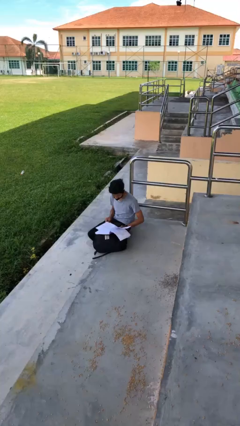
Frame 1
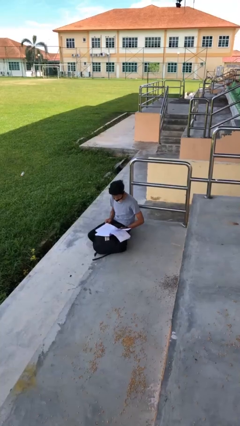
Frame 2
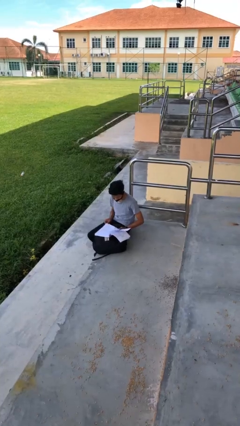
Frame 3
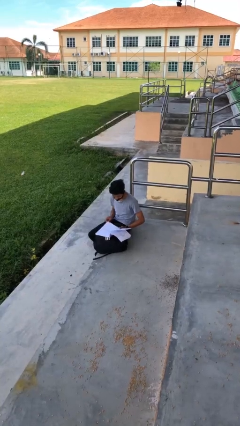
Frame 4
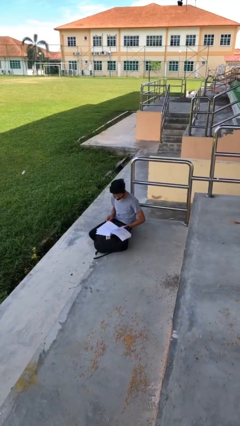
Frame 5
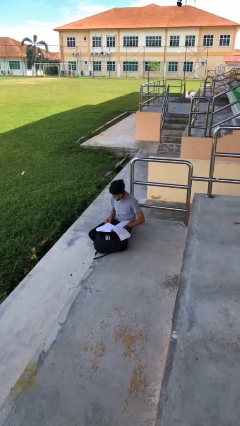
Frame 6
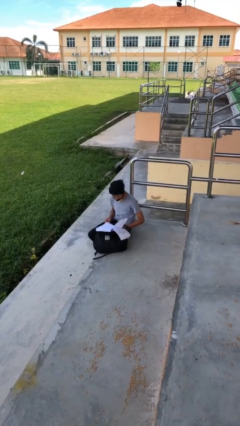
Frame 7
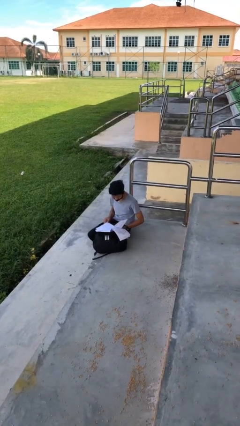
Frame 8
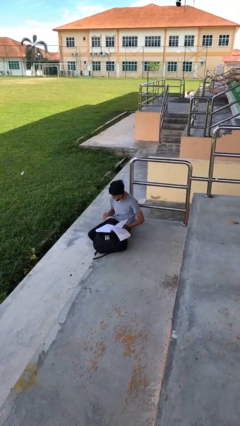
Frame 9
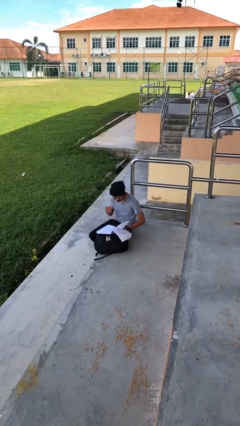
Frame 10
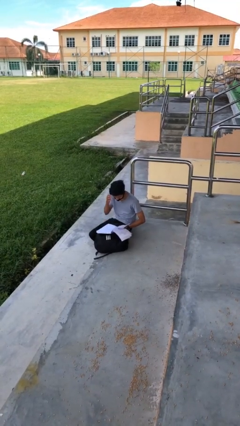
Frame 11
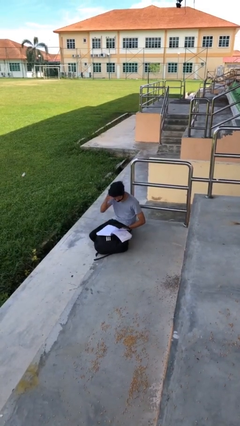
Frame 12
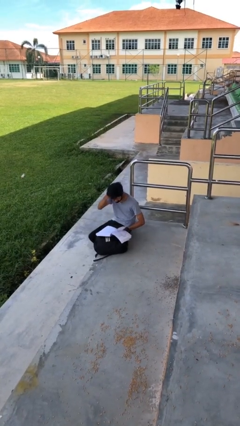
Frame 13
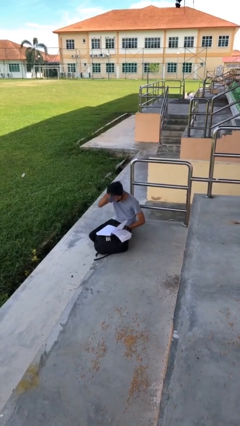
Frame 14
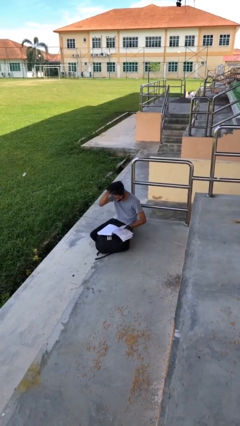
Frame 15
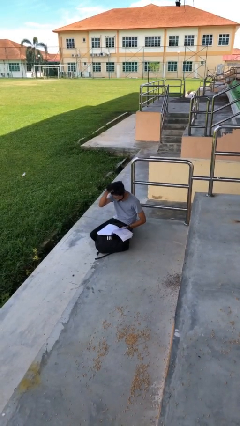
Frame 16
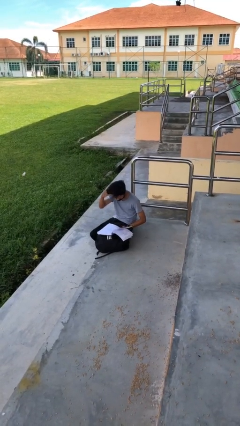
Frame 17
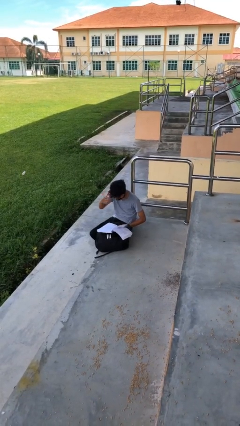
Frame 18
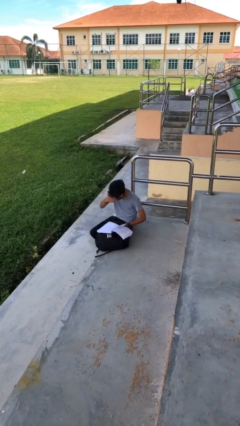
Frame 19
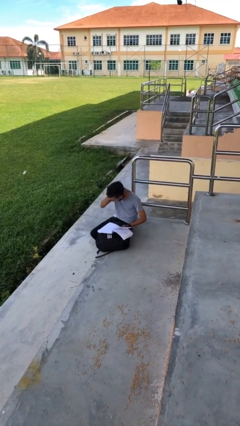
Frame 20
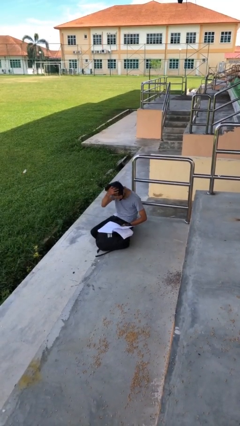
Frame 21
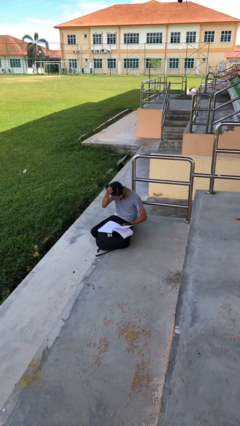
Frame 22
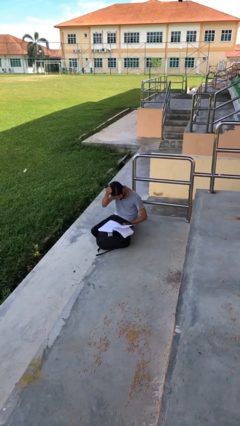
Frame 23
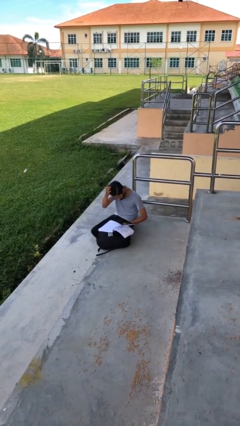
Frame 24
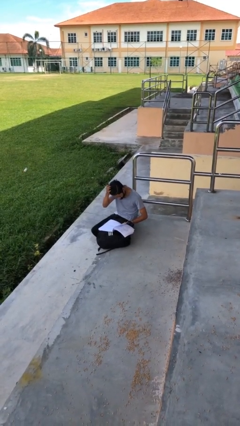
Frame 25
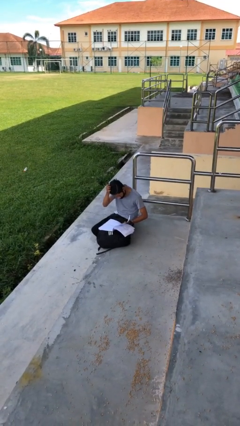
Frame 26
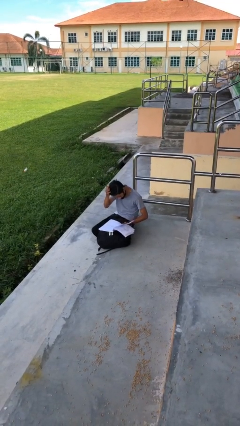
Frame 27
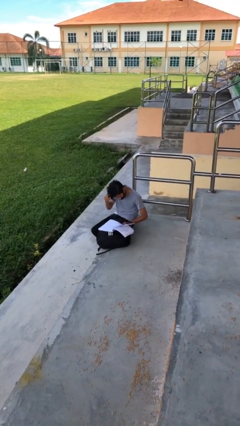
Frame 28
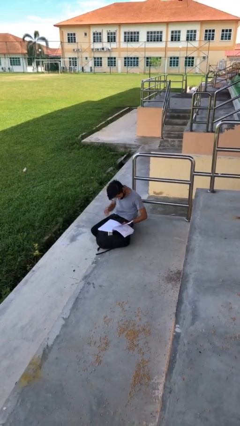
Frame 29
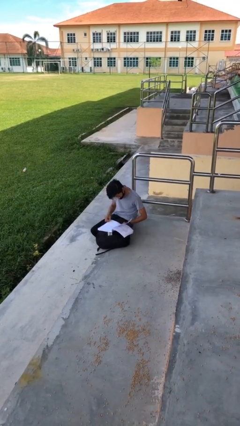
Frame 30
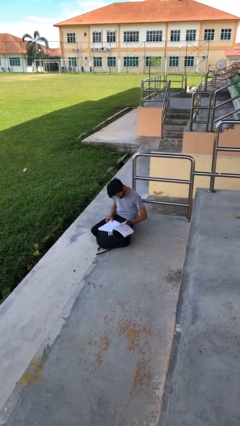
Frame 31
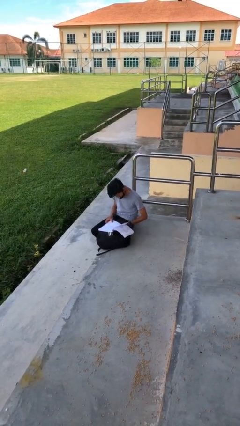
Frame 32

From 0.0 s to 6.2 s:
person reads document

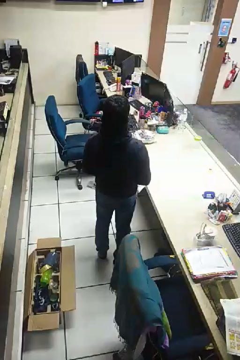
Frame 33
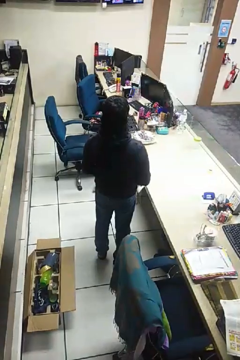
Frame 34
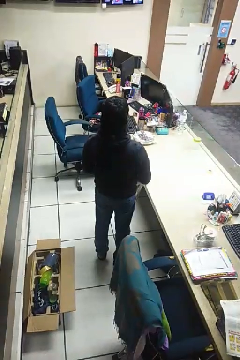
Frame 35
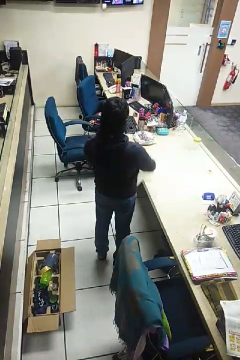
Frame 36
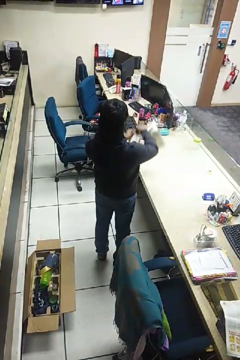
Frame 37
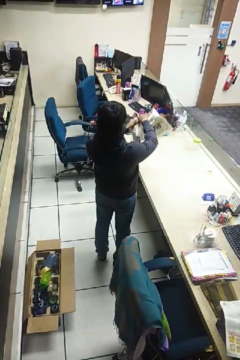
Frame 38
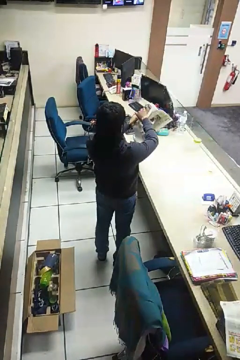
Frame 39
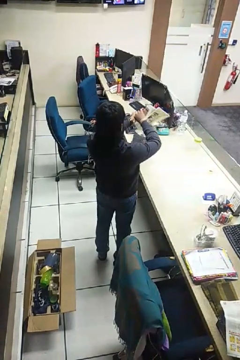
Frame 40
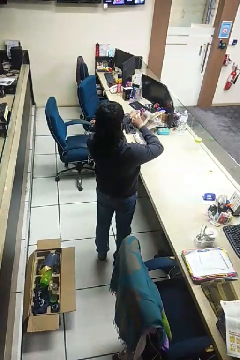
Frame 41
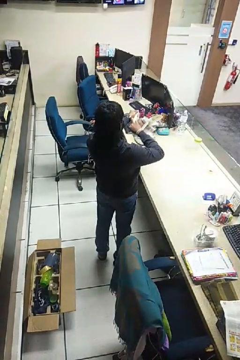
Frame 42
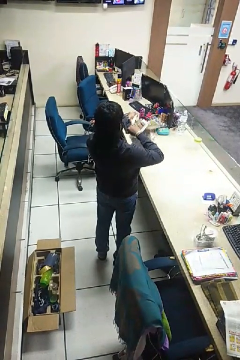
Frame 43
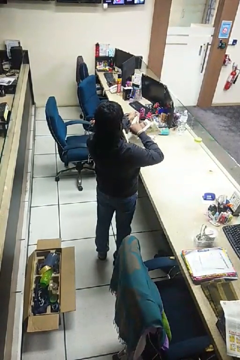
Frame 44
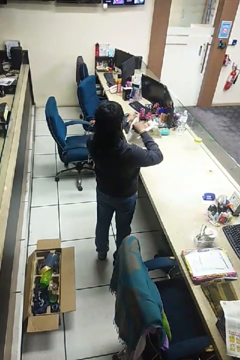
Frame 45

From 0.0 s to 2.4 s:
person tears paper

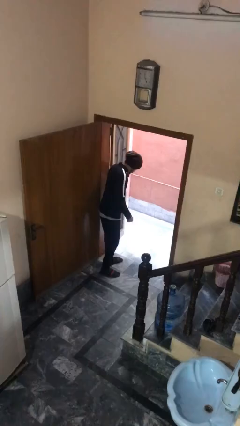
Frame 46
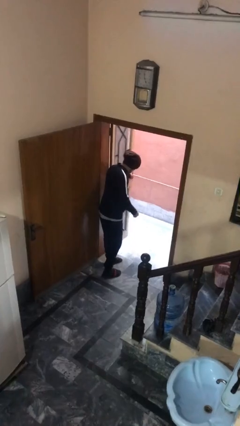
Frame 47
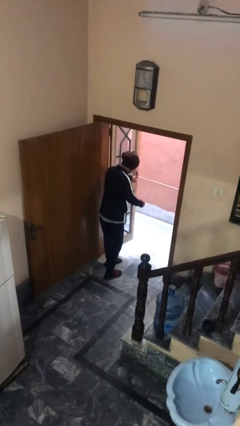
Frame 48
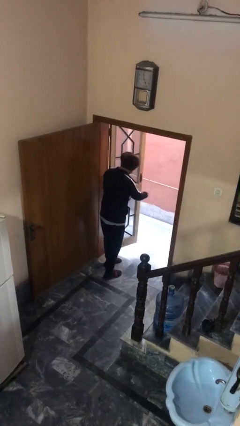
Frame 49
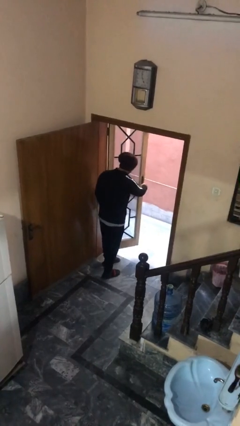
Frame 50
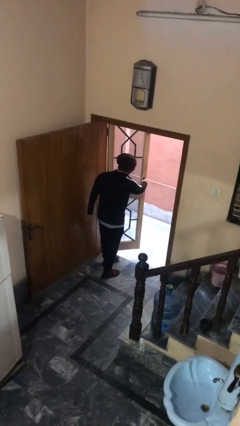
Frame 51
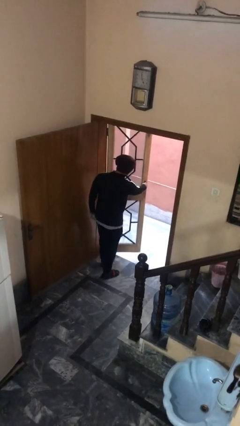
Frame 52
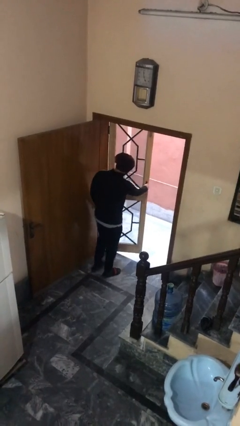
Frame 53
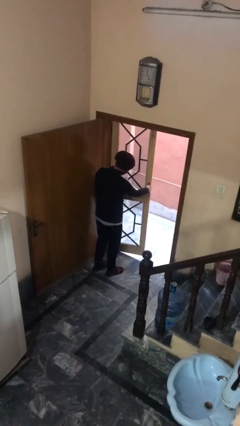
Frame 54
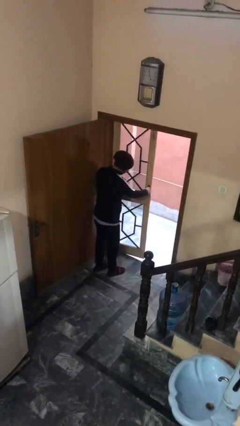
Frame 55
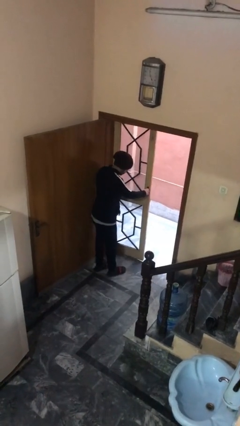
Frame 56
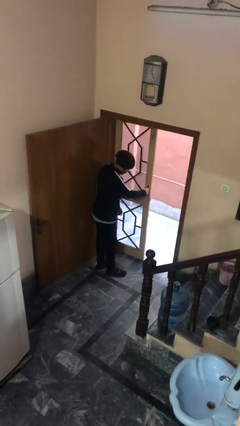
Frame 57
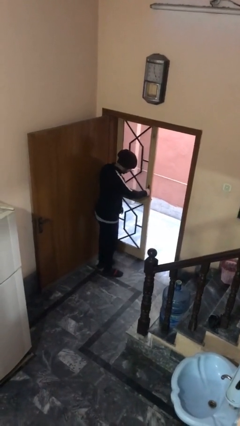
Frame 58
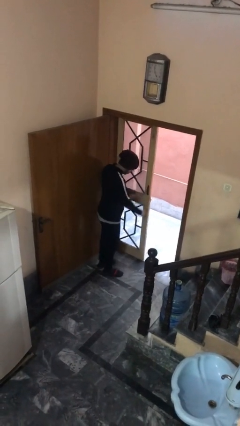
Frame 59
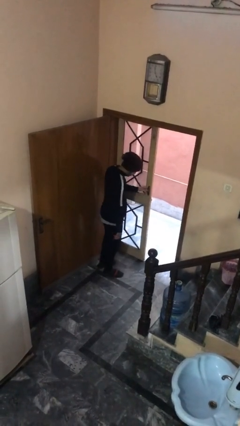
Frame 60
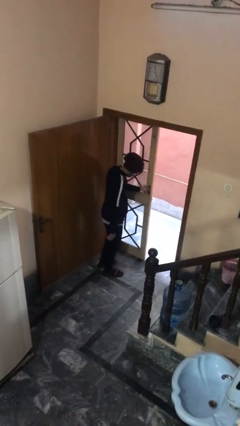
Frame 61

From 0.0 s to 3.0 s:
person closes facility door

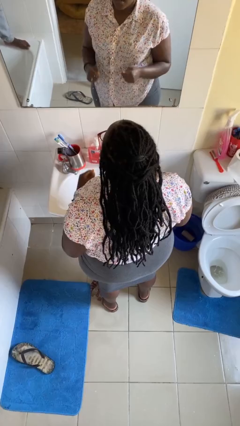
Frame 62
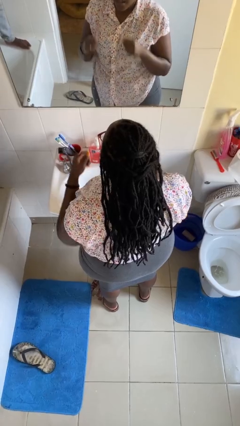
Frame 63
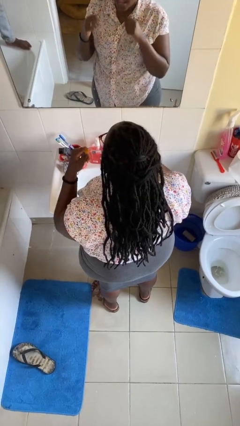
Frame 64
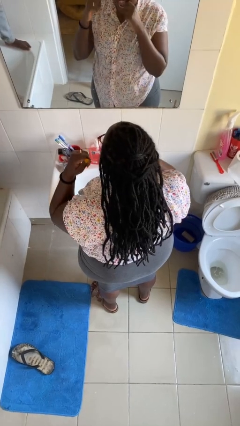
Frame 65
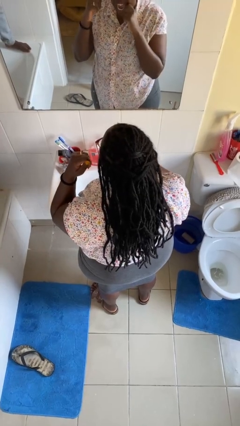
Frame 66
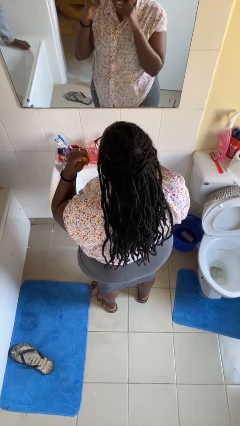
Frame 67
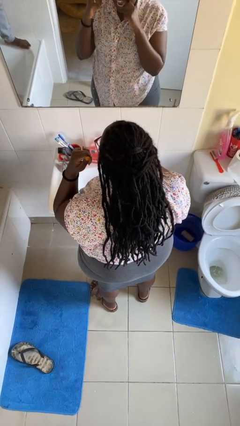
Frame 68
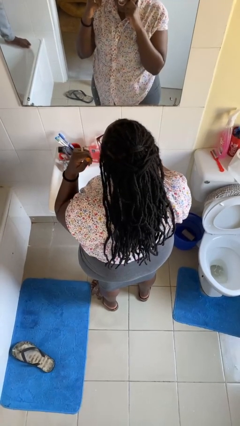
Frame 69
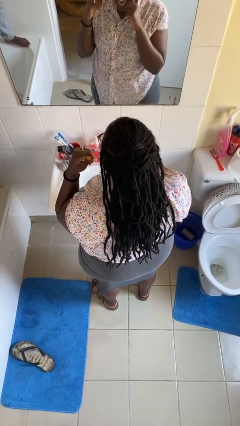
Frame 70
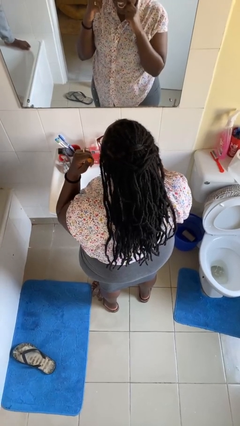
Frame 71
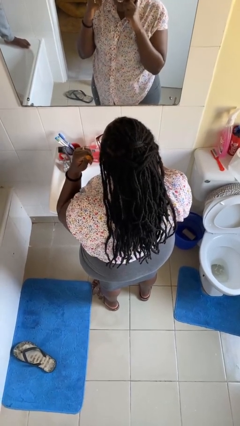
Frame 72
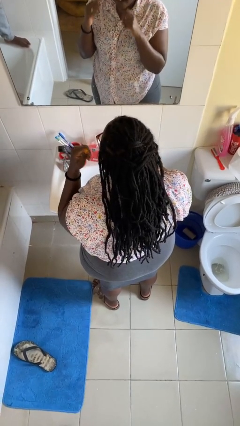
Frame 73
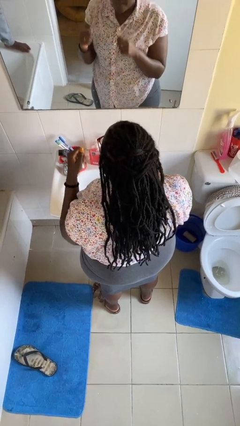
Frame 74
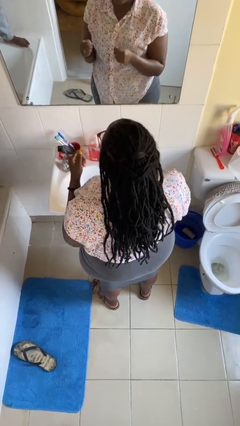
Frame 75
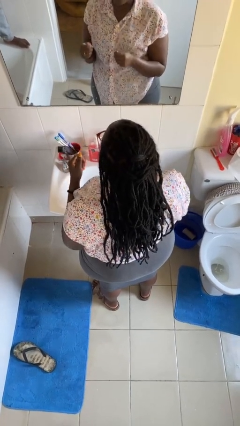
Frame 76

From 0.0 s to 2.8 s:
person flosses

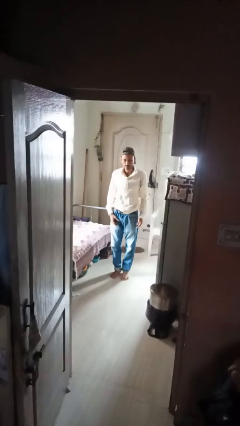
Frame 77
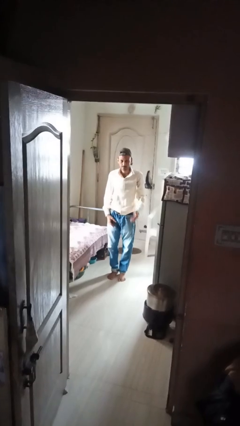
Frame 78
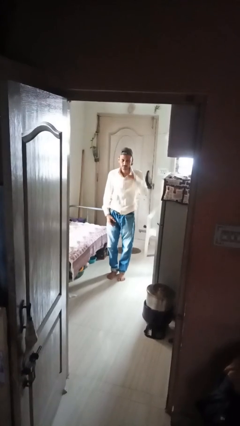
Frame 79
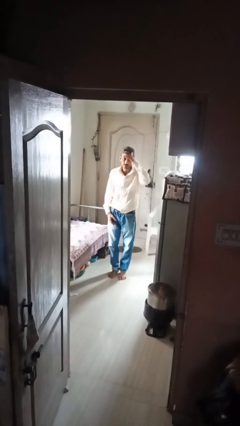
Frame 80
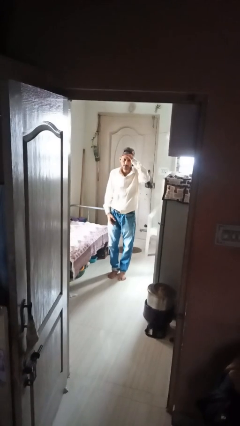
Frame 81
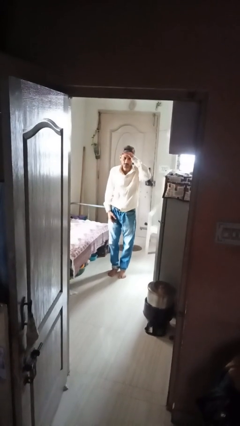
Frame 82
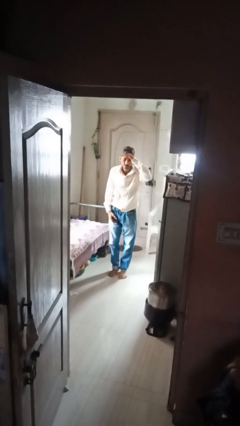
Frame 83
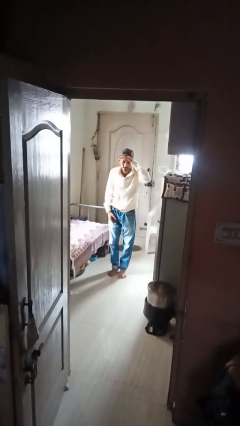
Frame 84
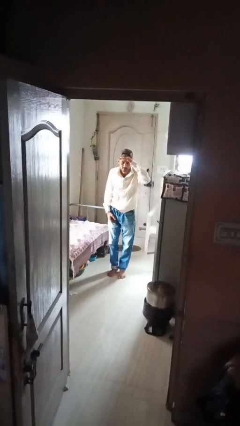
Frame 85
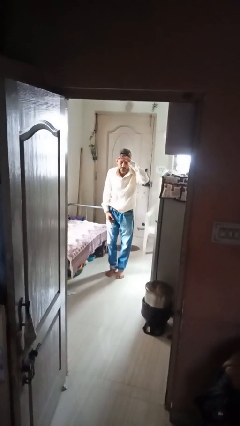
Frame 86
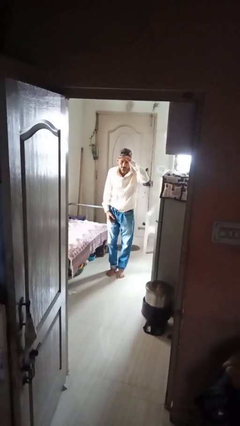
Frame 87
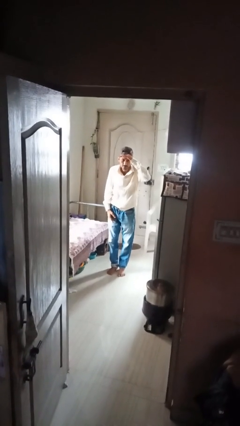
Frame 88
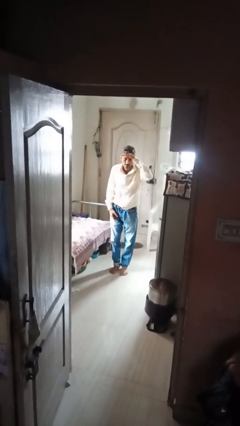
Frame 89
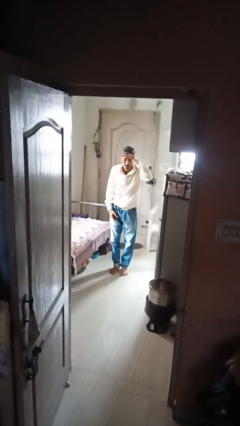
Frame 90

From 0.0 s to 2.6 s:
person shades eyes

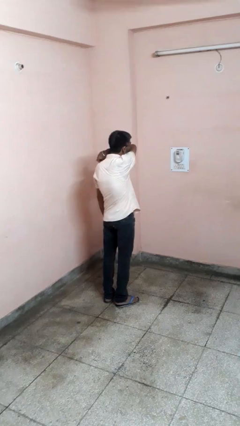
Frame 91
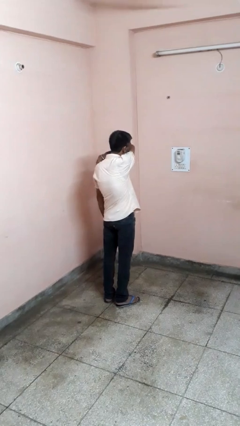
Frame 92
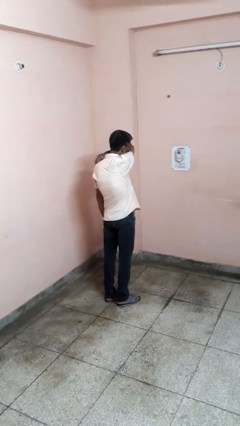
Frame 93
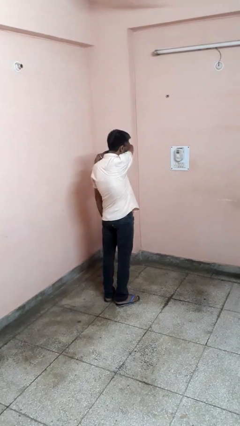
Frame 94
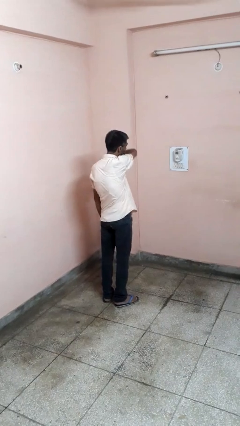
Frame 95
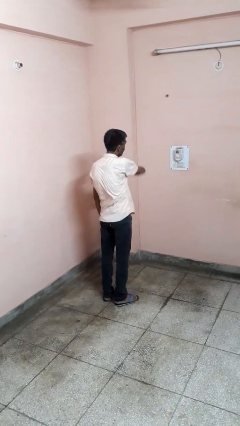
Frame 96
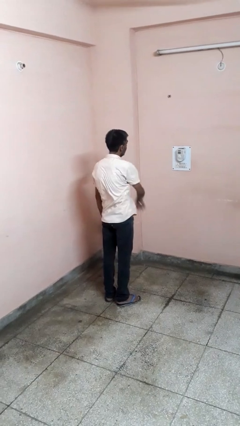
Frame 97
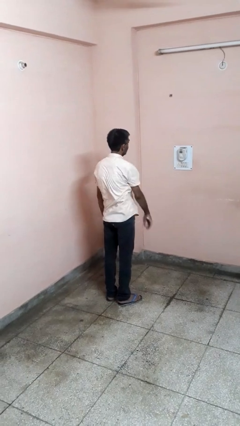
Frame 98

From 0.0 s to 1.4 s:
person sneezes into arm
